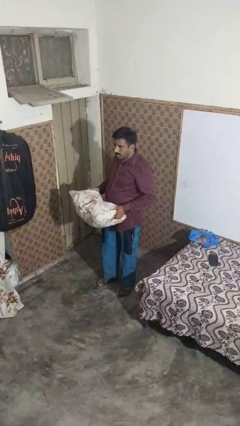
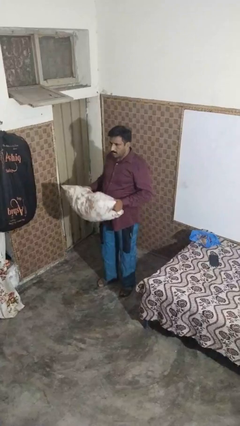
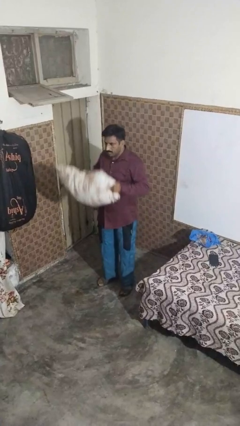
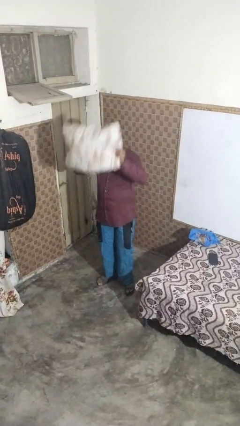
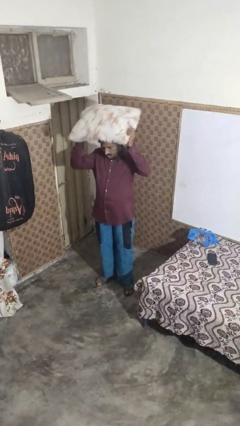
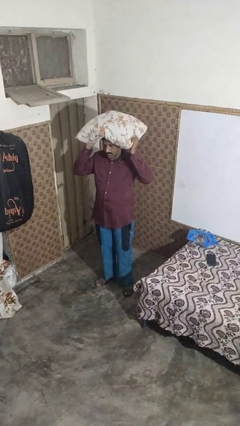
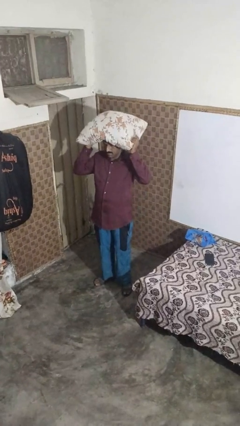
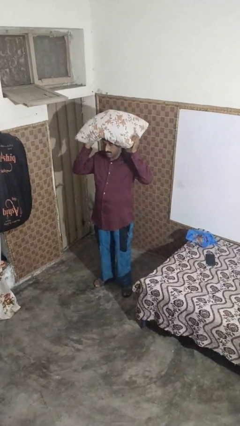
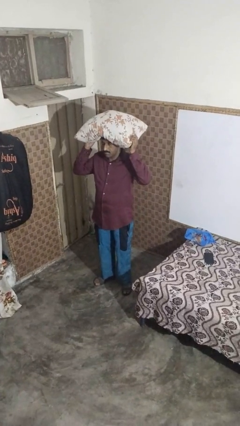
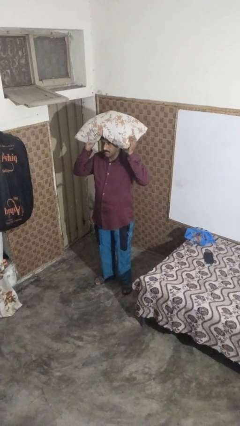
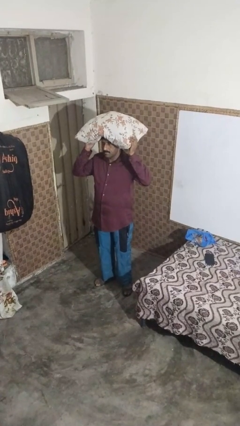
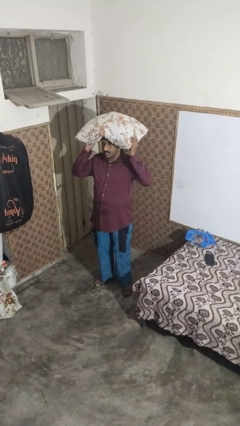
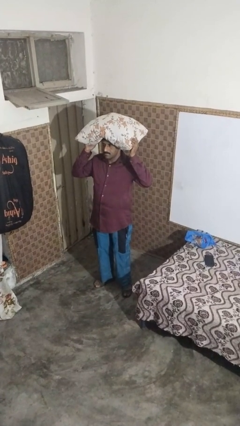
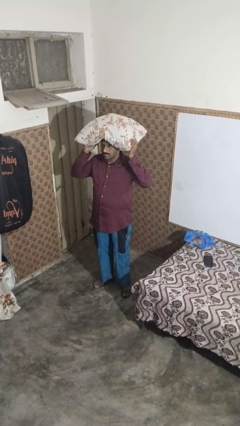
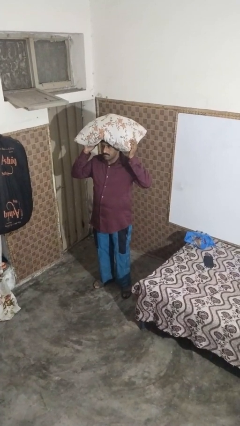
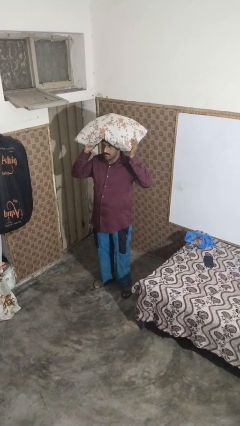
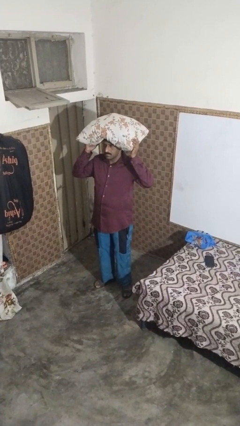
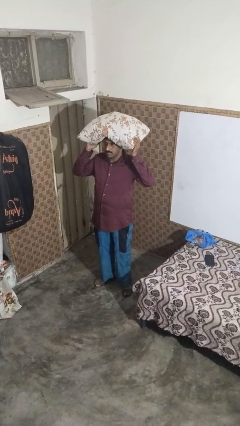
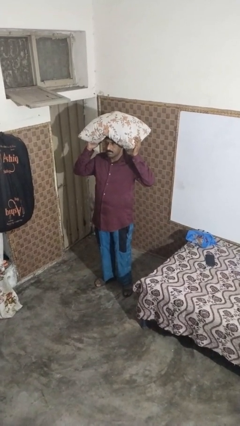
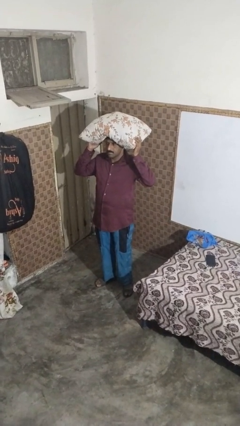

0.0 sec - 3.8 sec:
person holds object above head

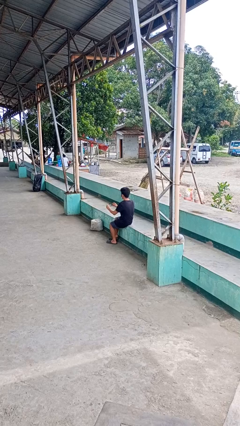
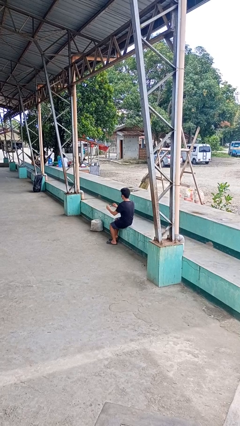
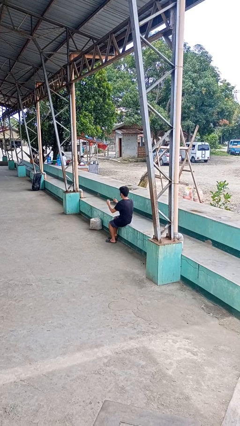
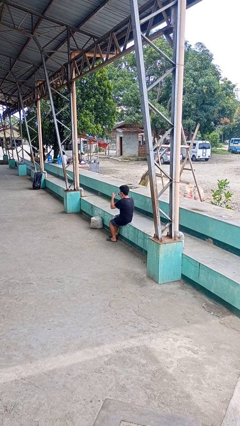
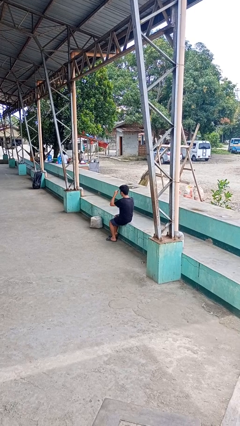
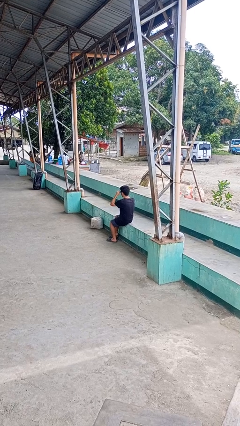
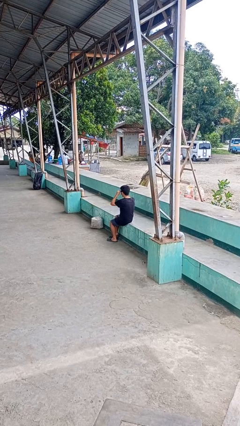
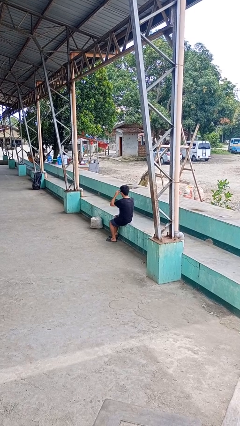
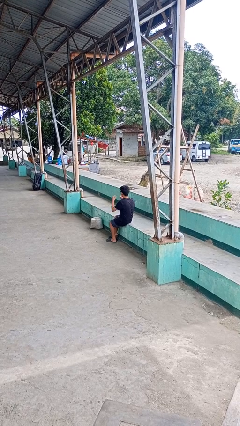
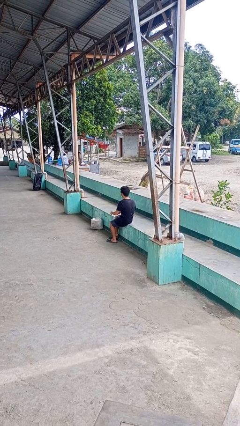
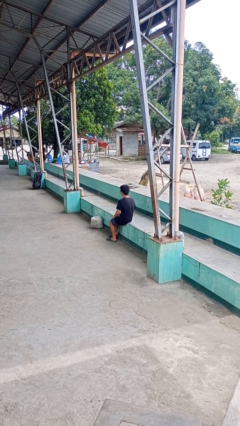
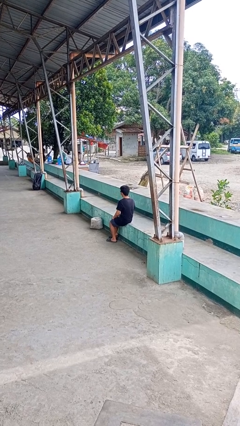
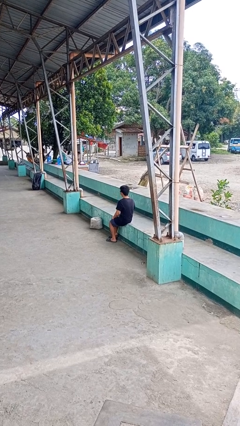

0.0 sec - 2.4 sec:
person puts on sunglasses

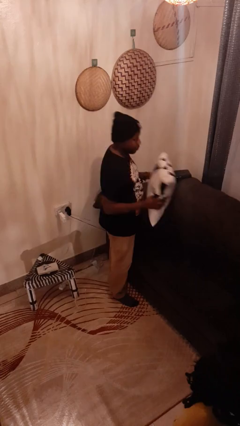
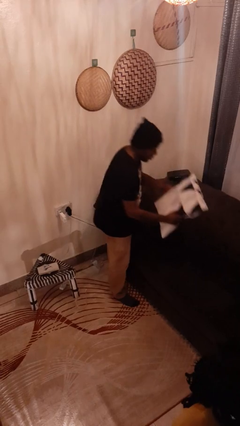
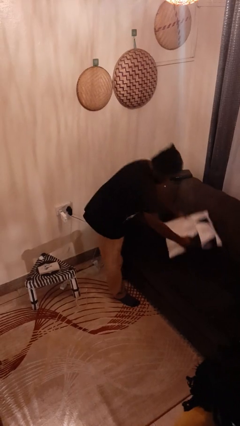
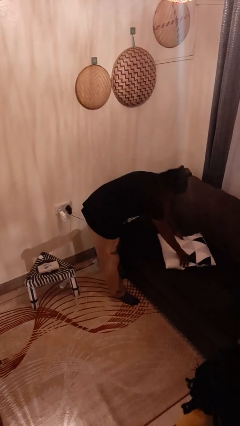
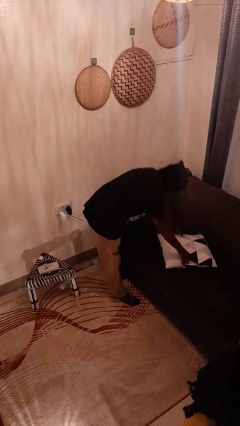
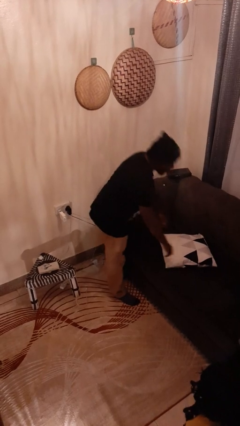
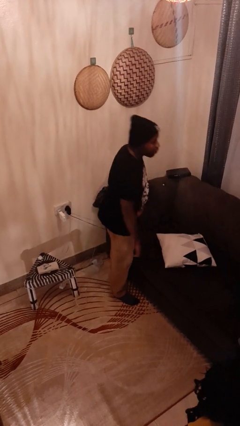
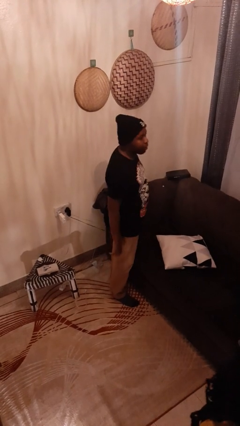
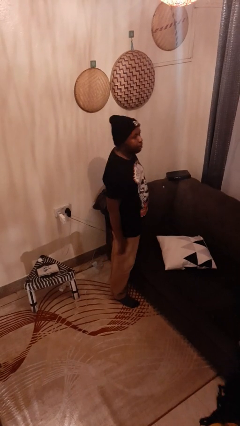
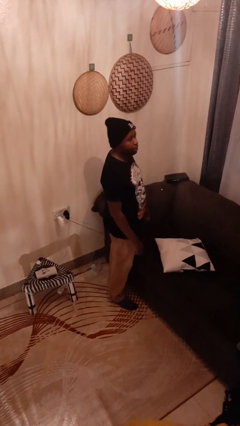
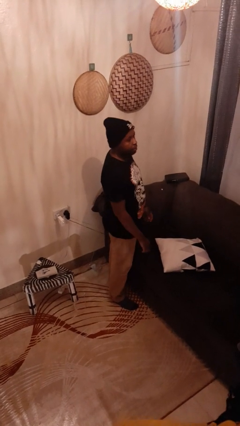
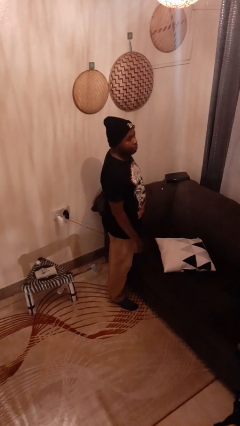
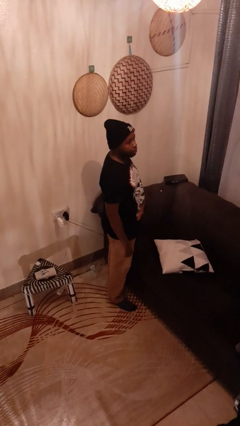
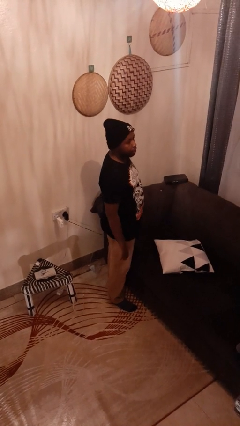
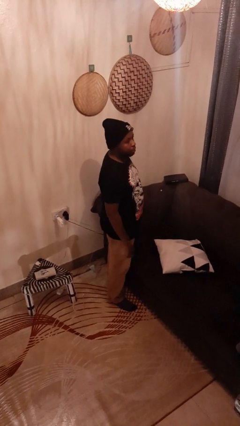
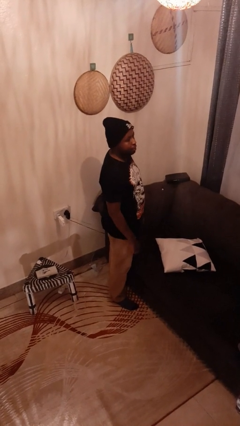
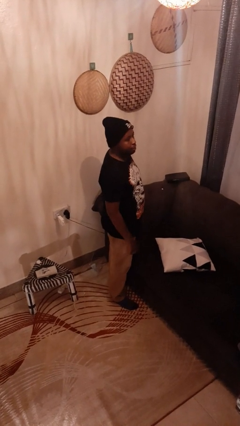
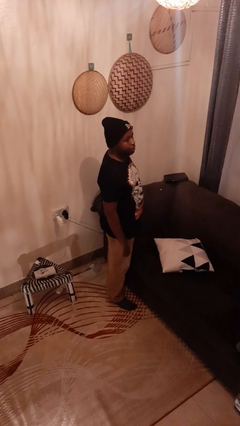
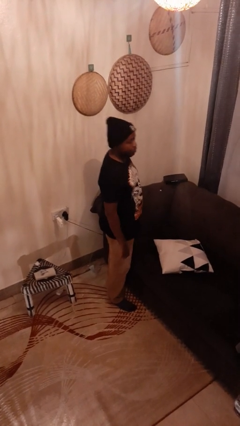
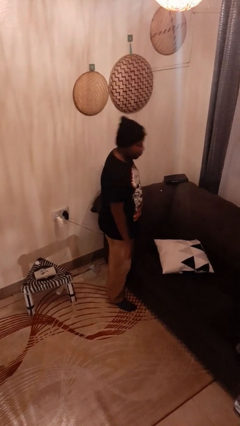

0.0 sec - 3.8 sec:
person puts down object on couch

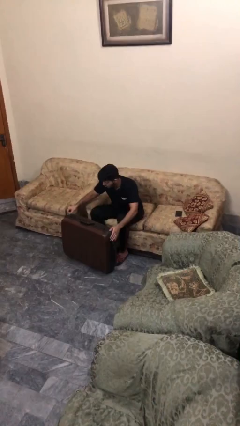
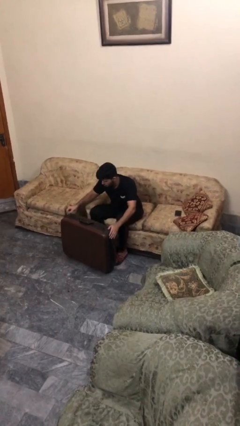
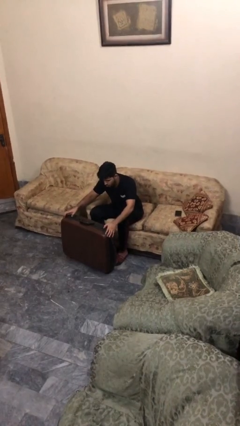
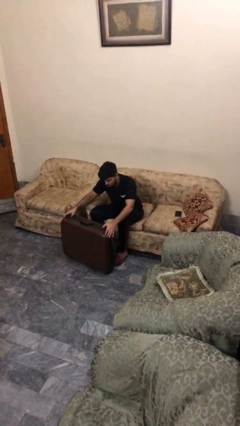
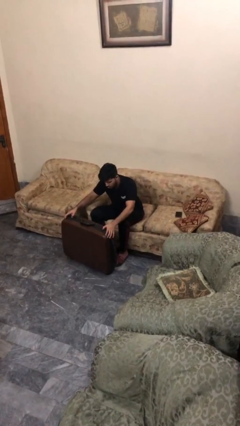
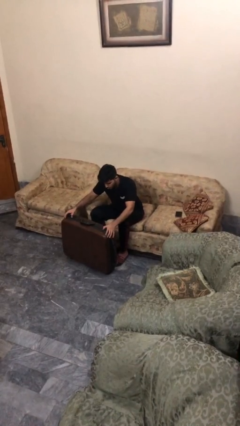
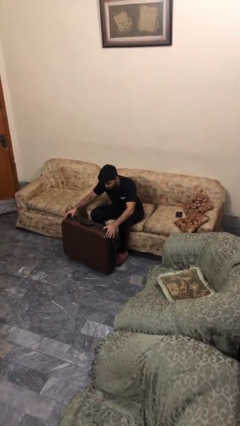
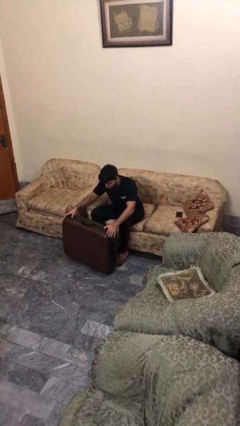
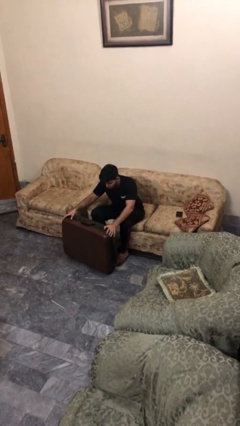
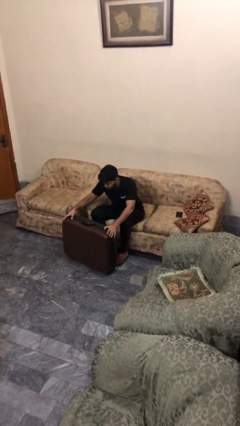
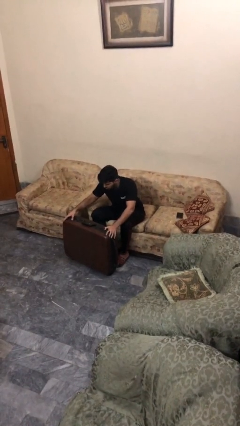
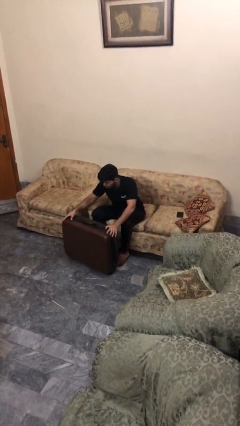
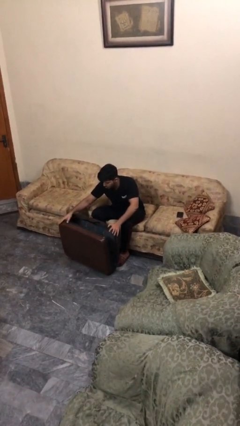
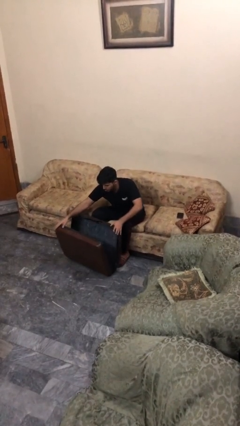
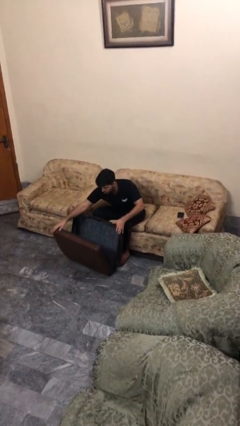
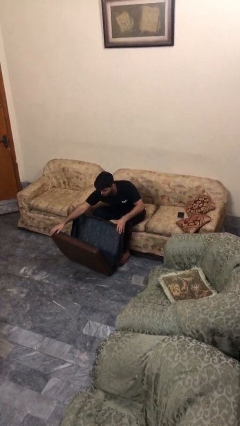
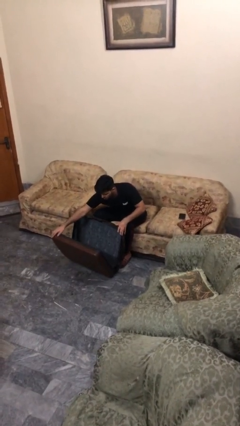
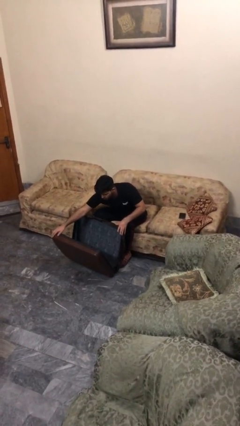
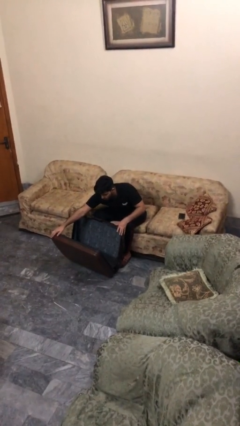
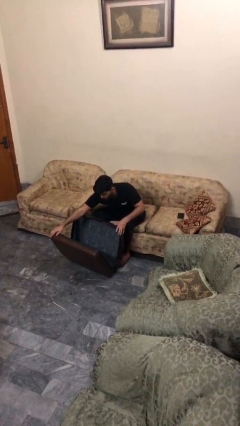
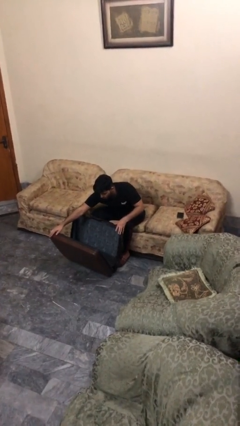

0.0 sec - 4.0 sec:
person opens suitcase

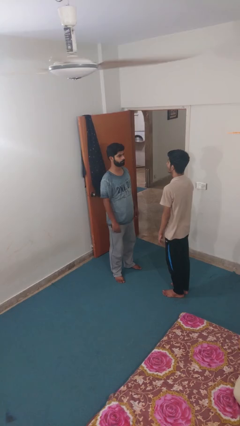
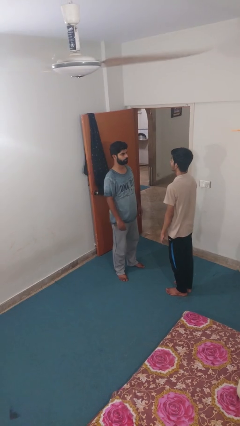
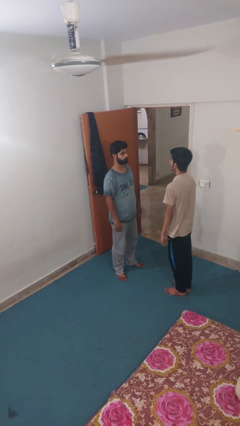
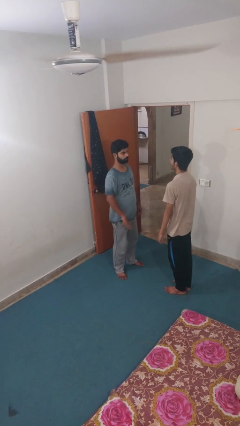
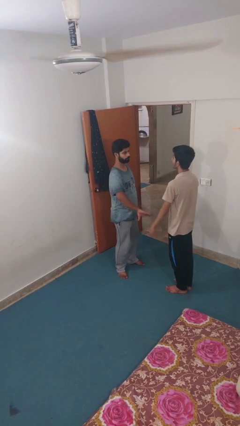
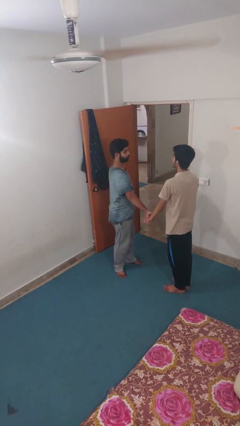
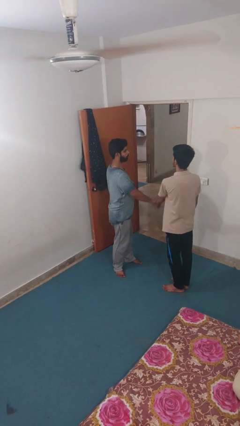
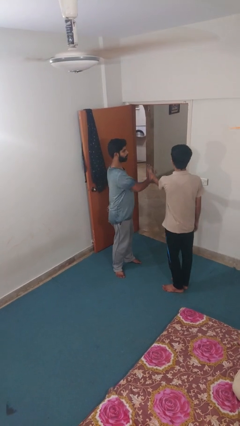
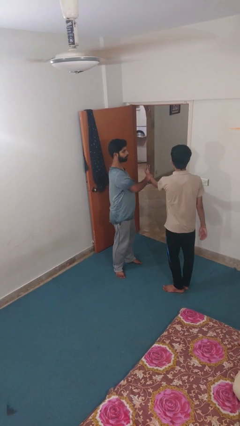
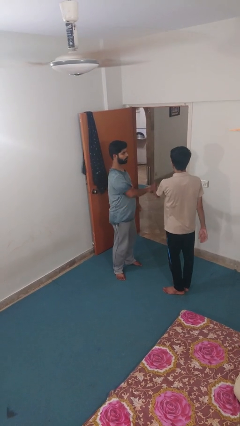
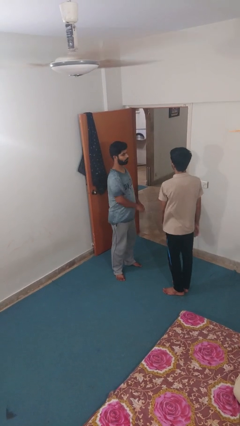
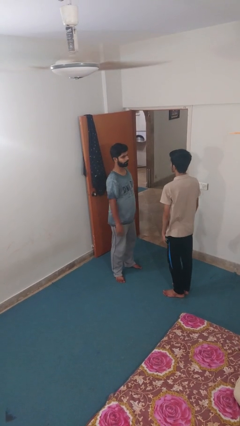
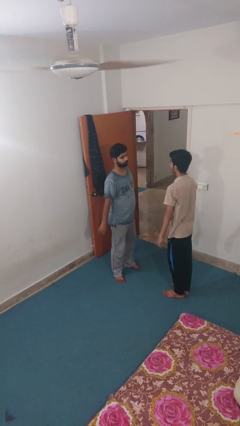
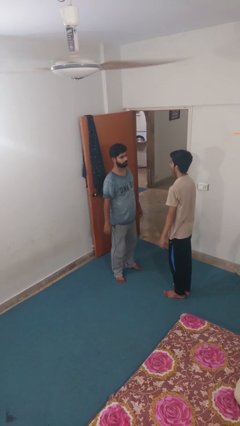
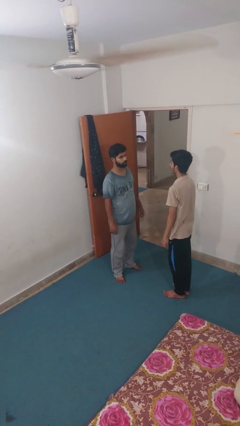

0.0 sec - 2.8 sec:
person grabs person by forearm

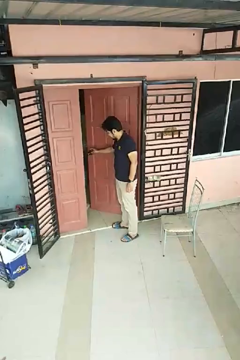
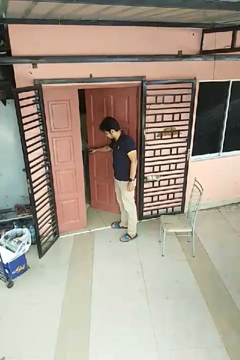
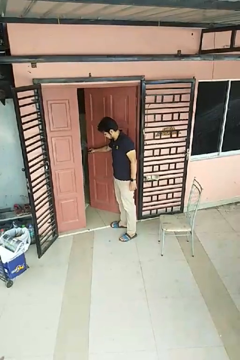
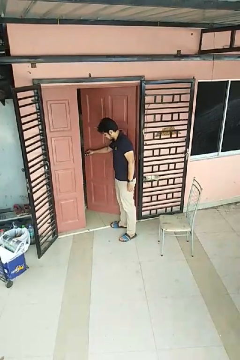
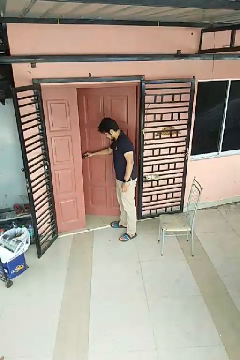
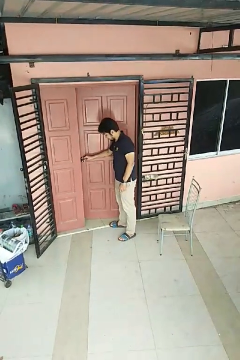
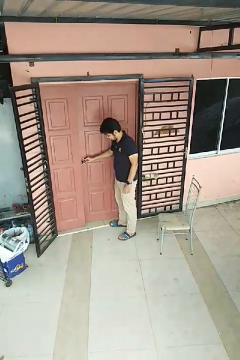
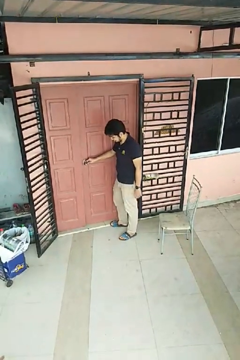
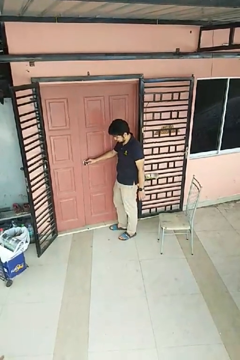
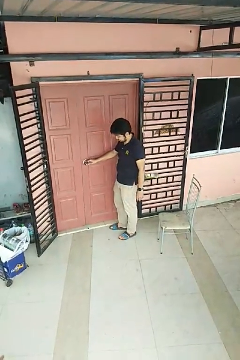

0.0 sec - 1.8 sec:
person closes door with foot
